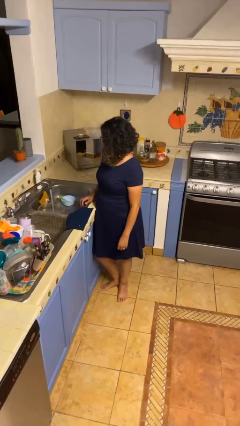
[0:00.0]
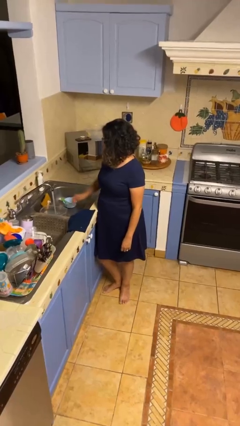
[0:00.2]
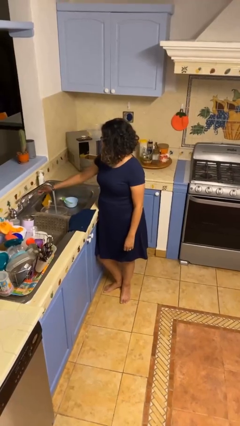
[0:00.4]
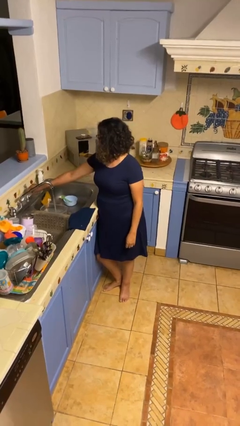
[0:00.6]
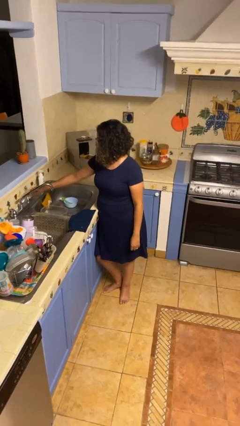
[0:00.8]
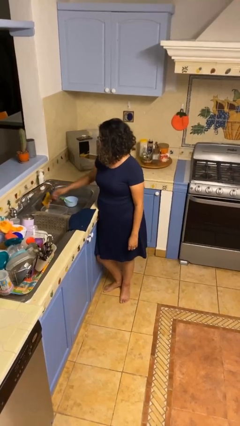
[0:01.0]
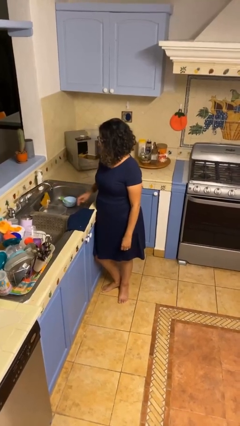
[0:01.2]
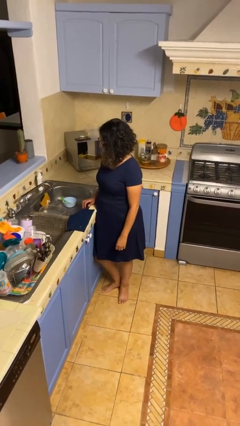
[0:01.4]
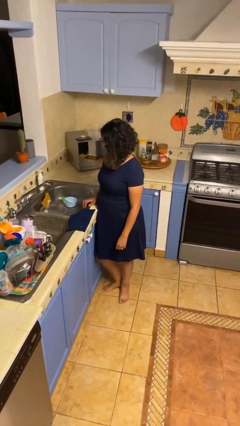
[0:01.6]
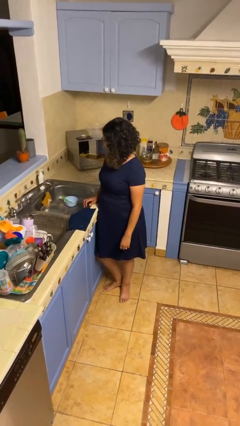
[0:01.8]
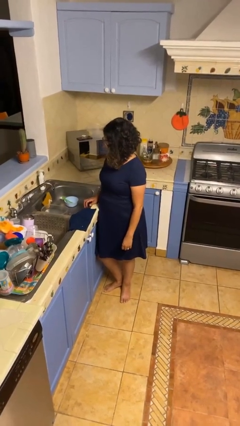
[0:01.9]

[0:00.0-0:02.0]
person turns off faucet

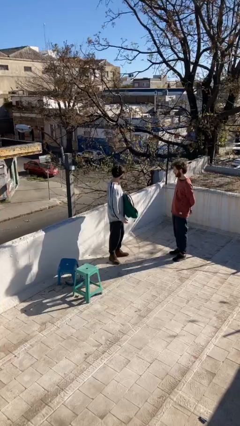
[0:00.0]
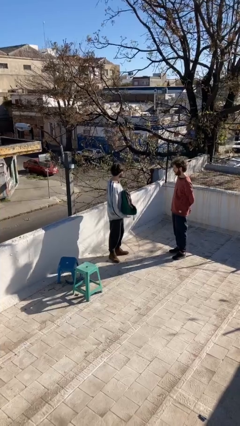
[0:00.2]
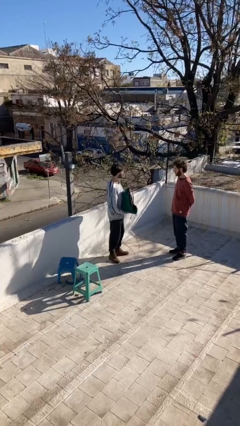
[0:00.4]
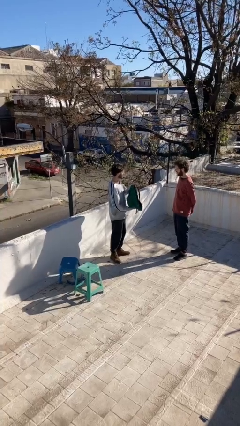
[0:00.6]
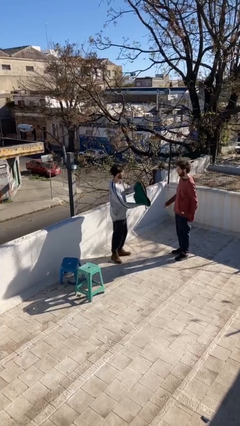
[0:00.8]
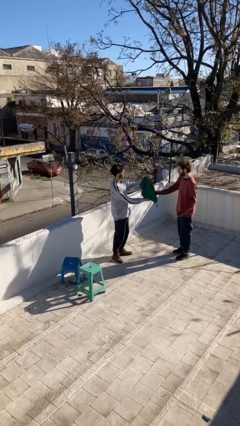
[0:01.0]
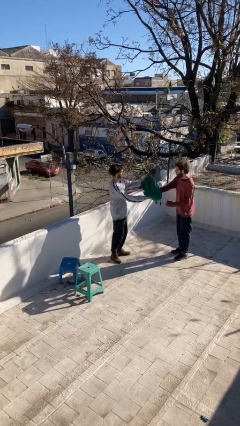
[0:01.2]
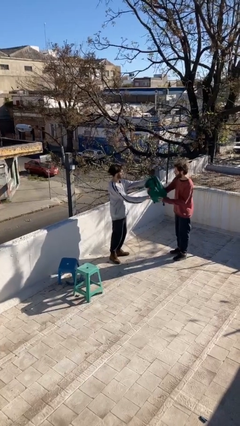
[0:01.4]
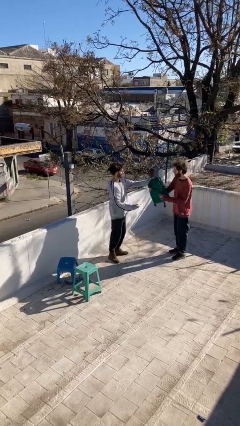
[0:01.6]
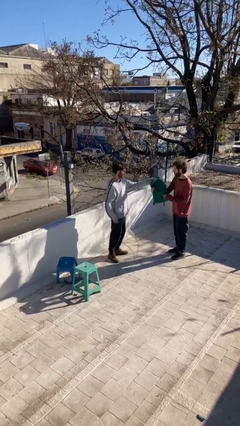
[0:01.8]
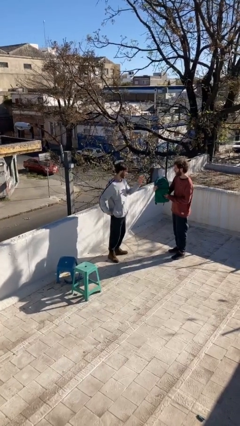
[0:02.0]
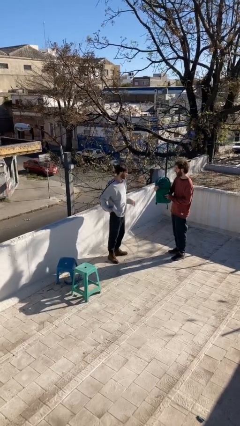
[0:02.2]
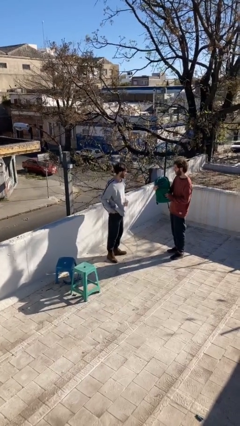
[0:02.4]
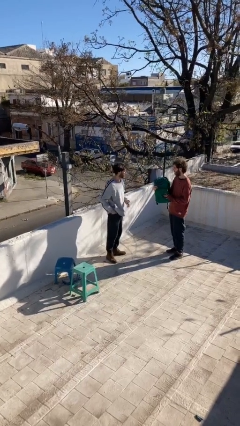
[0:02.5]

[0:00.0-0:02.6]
person transfers object to person

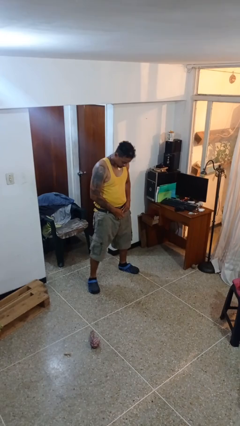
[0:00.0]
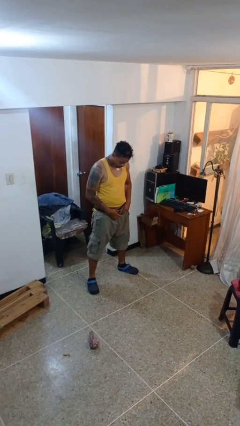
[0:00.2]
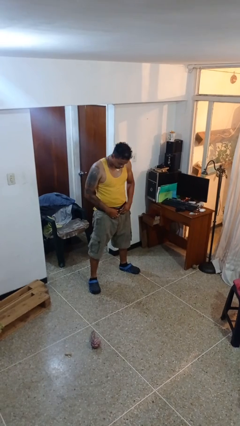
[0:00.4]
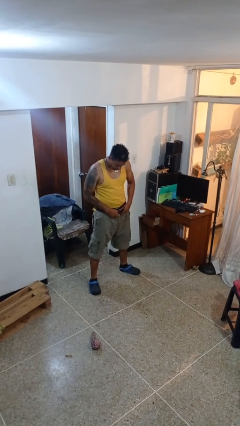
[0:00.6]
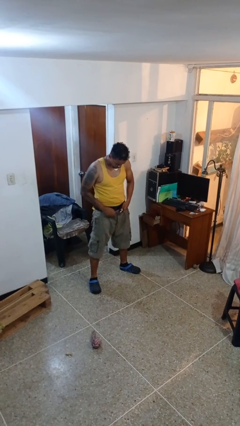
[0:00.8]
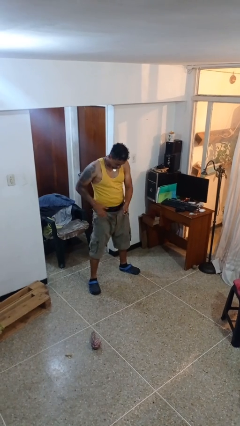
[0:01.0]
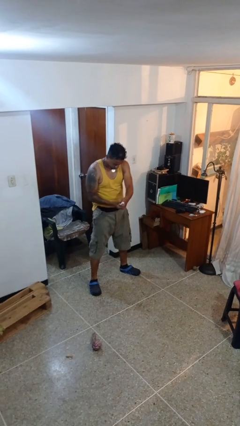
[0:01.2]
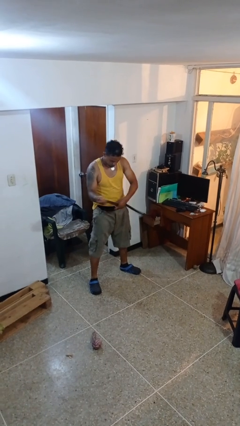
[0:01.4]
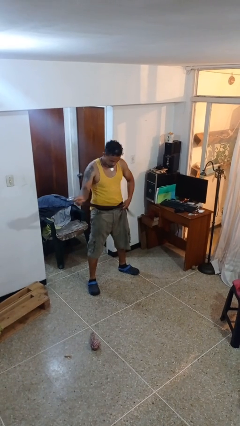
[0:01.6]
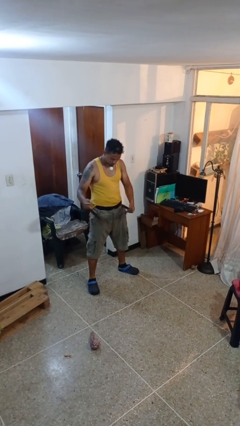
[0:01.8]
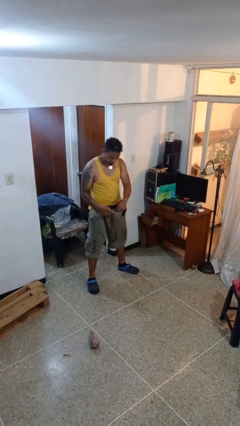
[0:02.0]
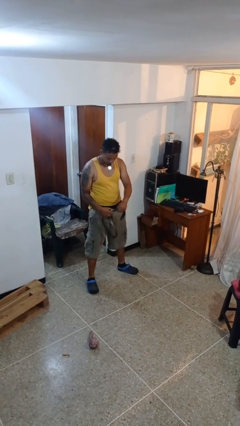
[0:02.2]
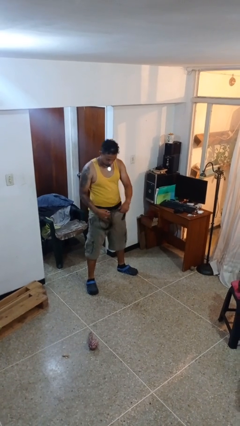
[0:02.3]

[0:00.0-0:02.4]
person takes off belt

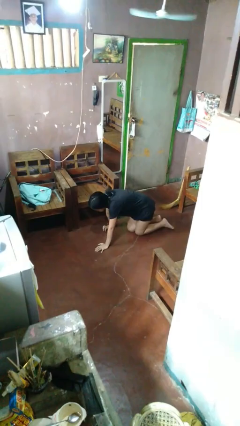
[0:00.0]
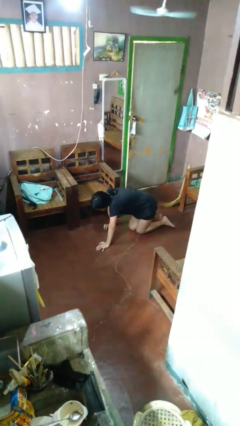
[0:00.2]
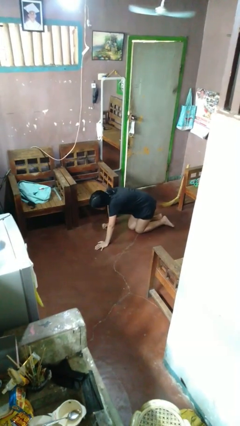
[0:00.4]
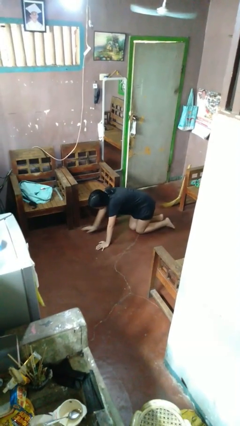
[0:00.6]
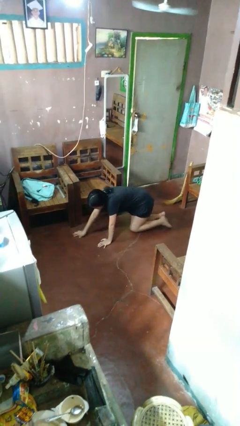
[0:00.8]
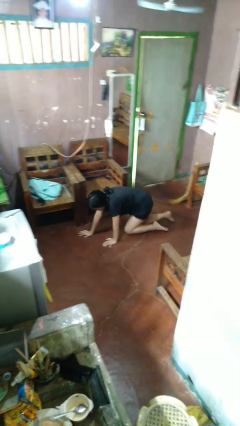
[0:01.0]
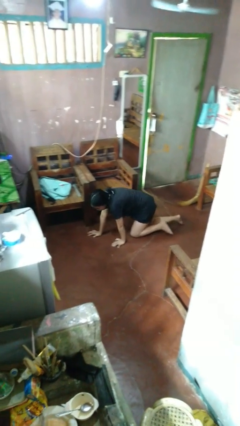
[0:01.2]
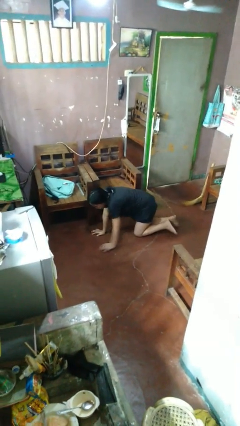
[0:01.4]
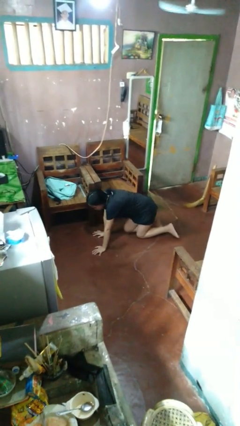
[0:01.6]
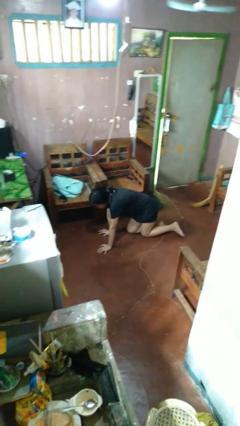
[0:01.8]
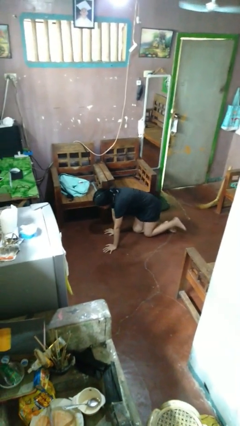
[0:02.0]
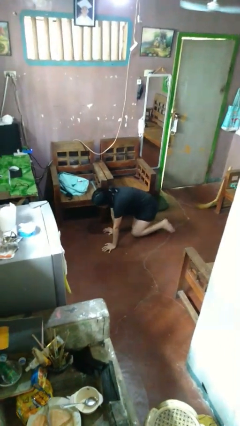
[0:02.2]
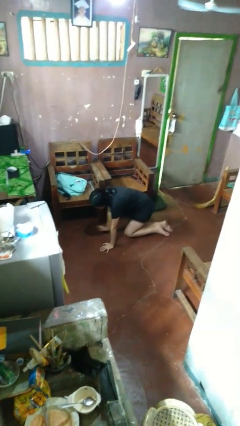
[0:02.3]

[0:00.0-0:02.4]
person crawls

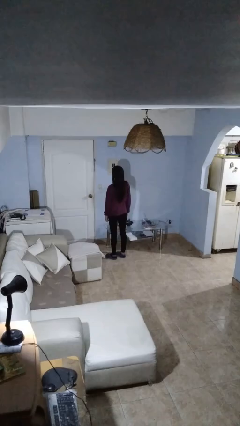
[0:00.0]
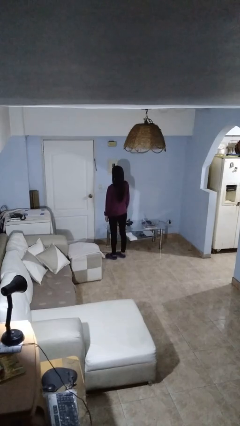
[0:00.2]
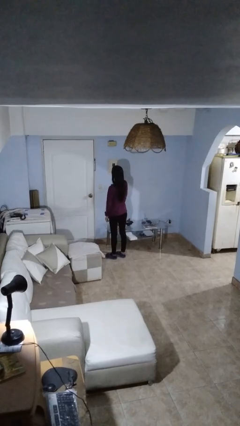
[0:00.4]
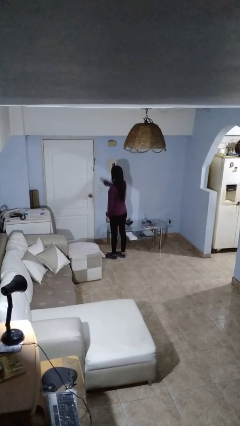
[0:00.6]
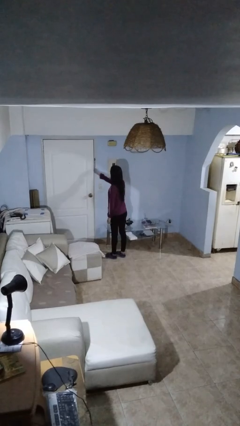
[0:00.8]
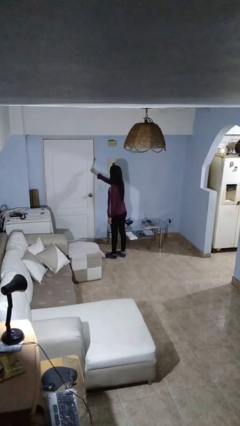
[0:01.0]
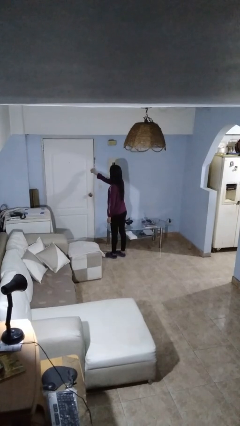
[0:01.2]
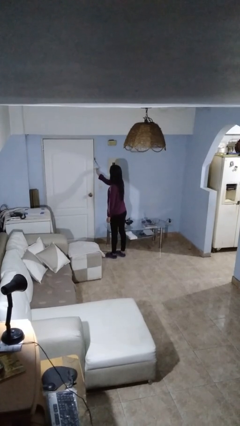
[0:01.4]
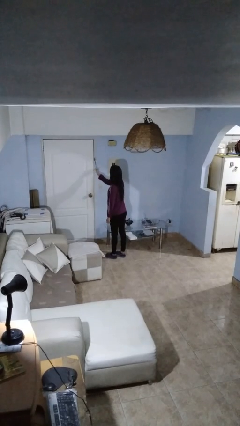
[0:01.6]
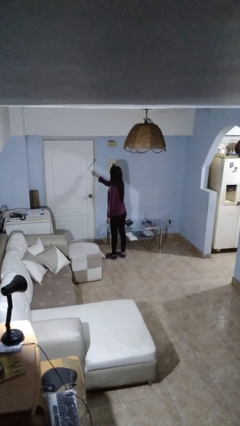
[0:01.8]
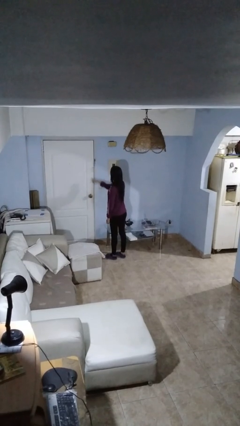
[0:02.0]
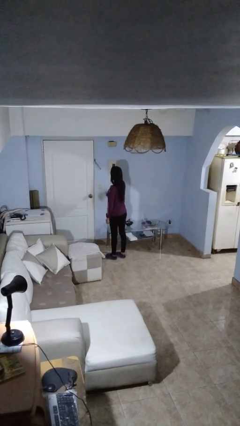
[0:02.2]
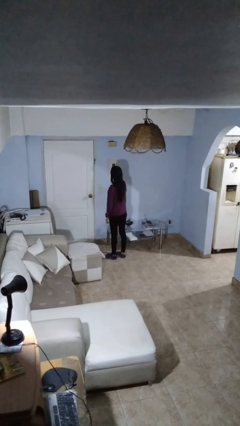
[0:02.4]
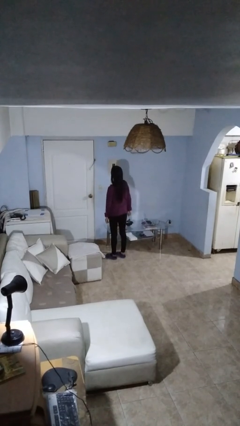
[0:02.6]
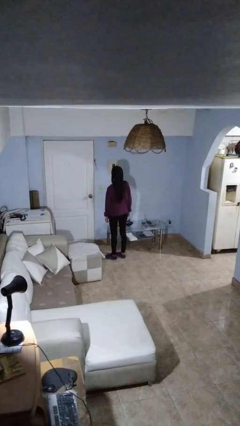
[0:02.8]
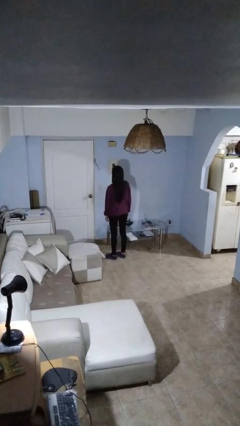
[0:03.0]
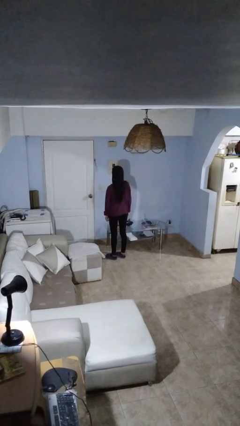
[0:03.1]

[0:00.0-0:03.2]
person taps object with finger

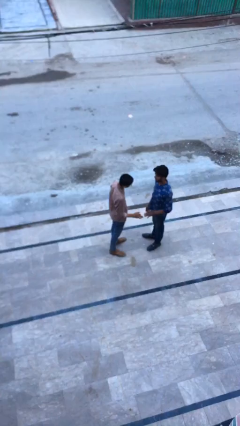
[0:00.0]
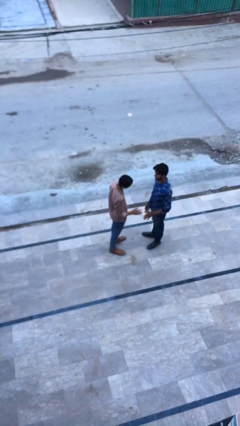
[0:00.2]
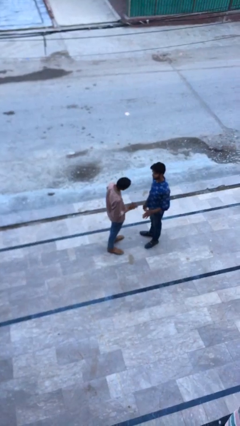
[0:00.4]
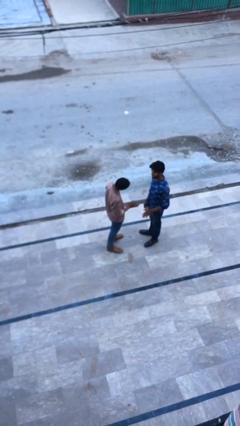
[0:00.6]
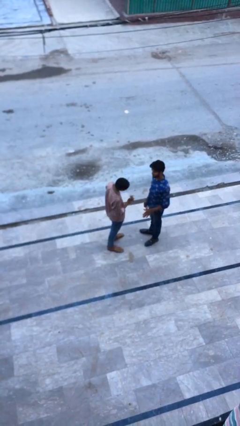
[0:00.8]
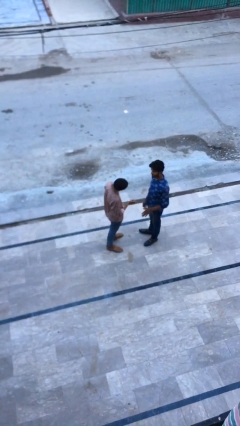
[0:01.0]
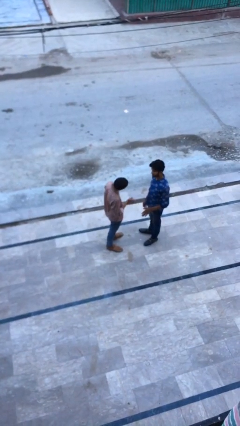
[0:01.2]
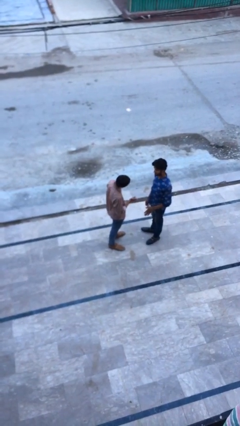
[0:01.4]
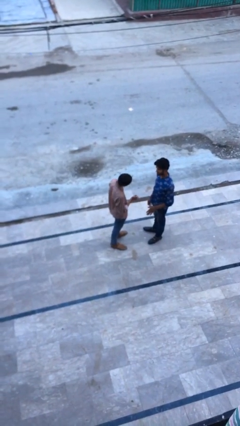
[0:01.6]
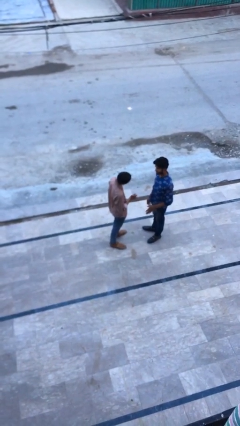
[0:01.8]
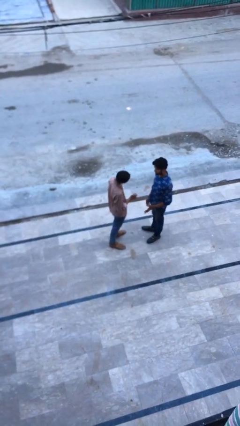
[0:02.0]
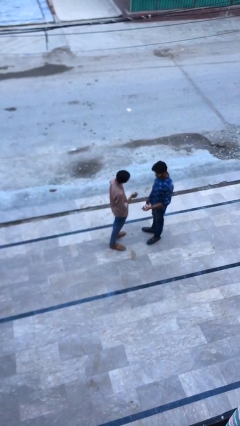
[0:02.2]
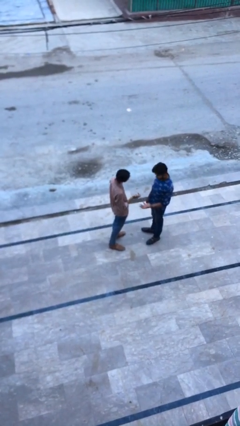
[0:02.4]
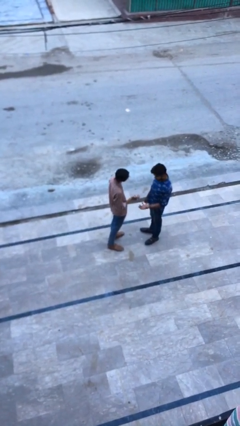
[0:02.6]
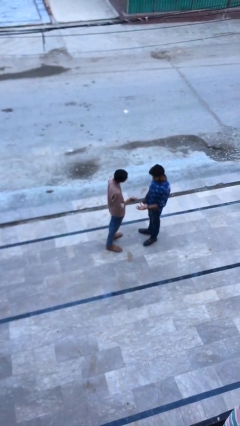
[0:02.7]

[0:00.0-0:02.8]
person talks to person

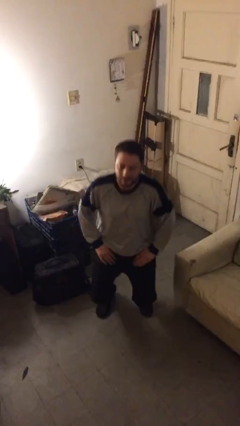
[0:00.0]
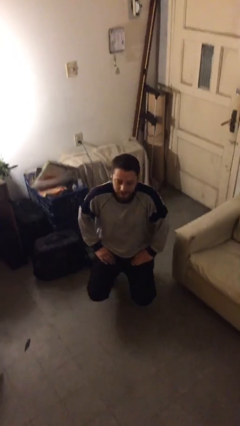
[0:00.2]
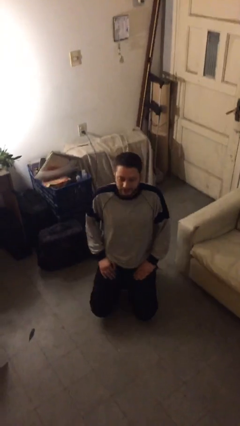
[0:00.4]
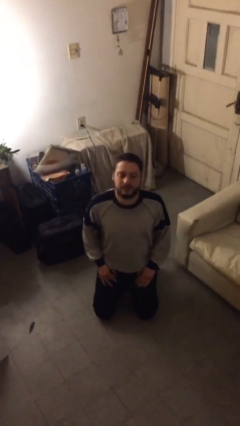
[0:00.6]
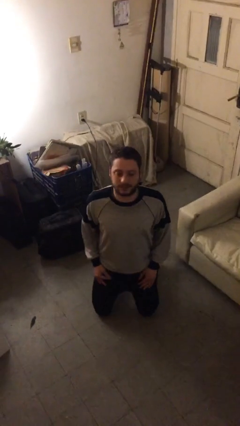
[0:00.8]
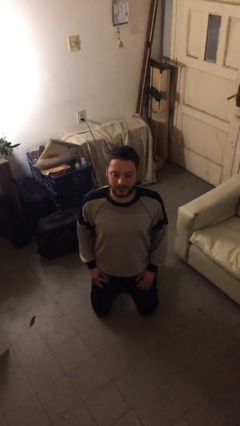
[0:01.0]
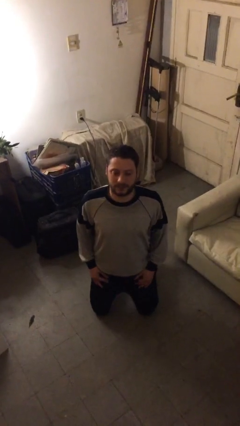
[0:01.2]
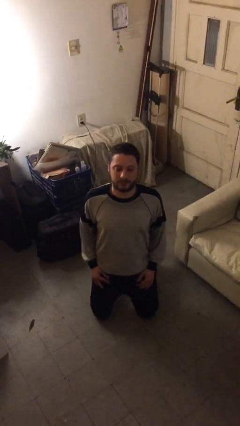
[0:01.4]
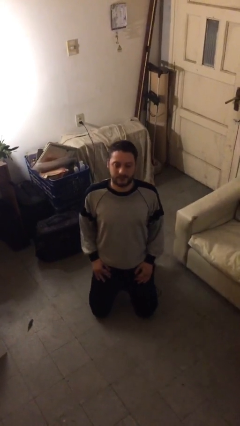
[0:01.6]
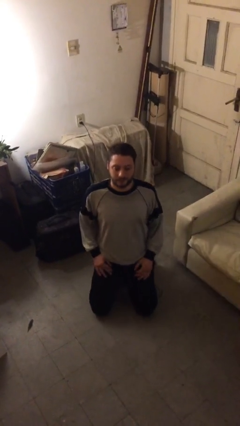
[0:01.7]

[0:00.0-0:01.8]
person kneels
